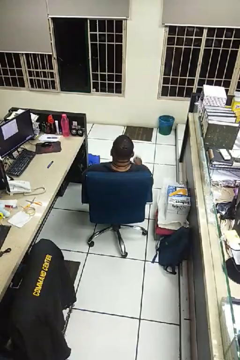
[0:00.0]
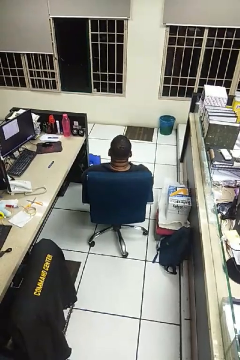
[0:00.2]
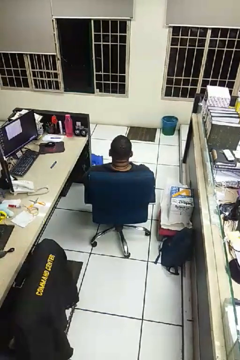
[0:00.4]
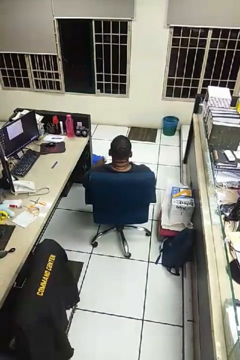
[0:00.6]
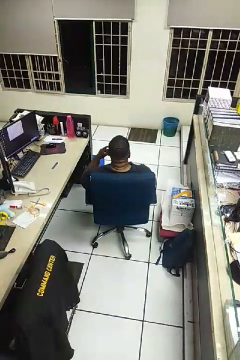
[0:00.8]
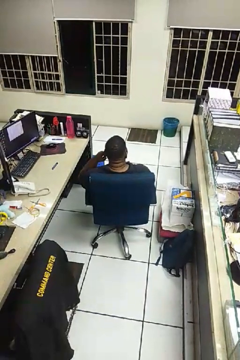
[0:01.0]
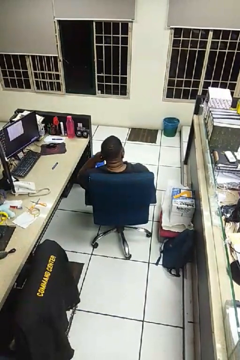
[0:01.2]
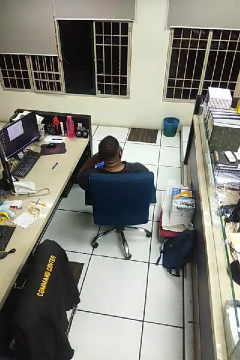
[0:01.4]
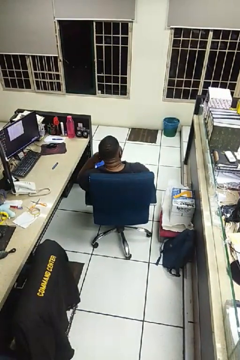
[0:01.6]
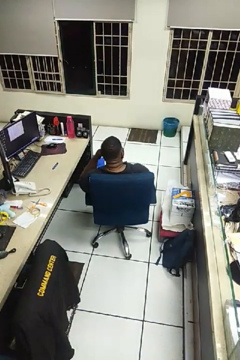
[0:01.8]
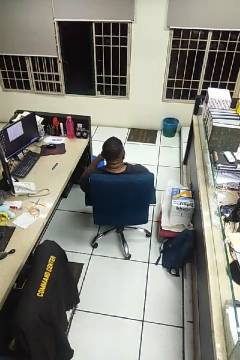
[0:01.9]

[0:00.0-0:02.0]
person gestures listen closely

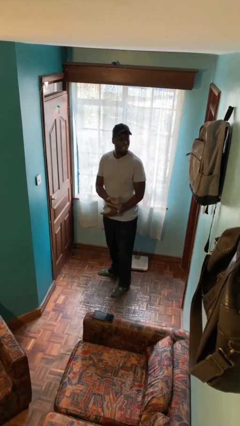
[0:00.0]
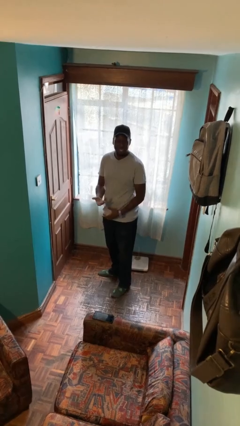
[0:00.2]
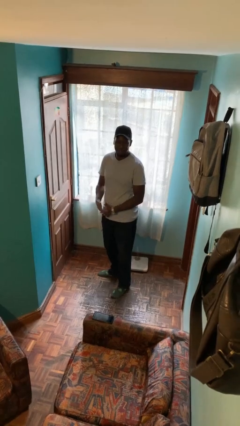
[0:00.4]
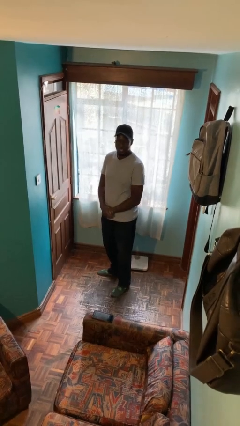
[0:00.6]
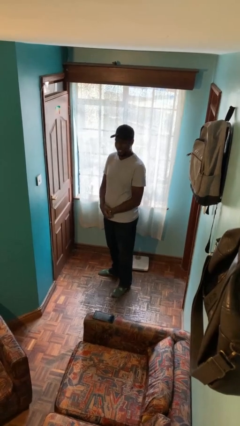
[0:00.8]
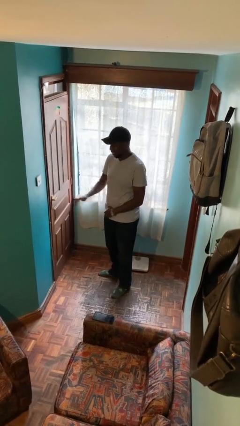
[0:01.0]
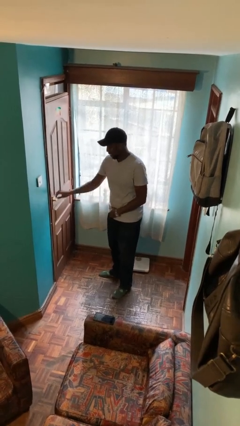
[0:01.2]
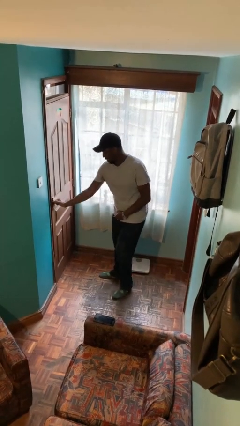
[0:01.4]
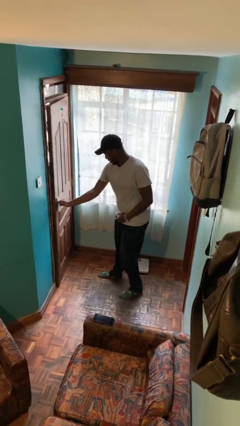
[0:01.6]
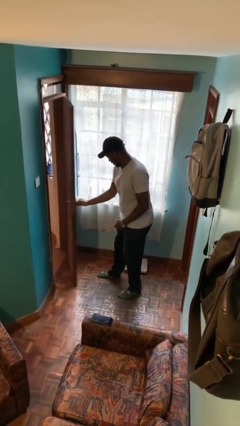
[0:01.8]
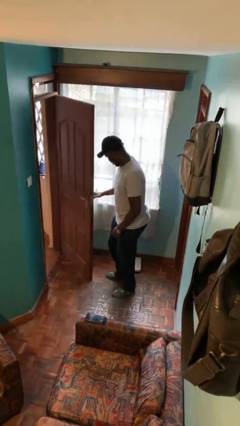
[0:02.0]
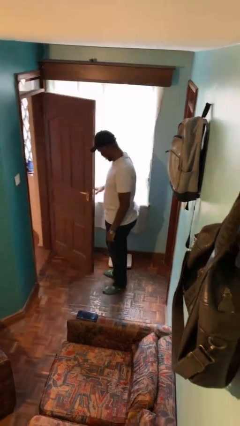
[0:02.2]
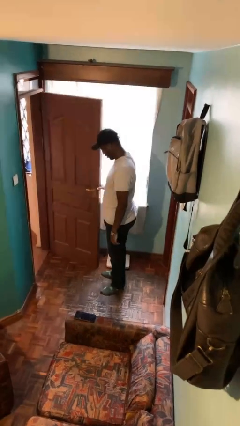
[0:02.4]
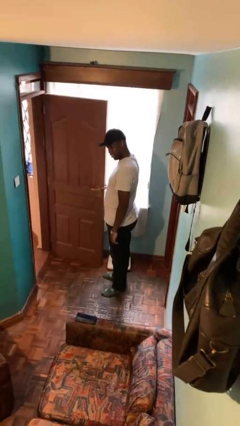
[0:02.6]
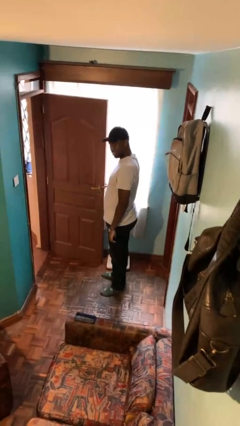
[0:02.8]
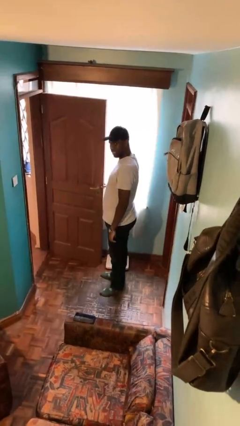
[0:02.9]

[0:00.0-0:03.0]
person opens facility door

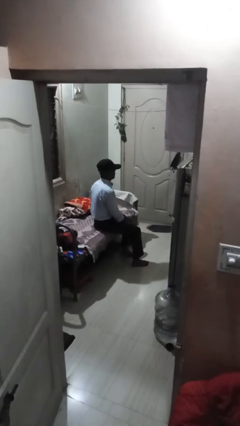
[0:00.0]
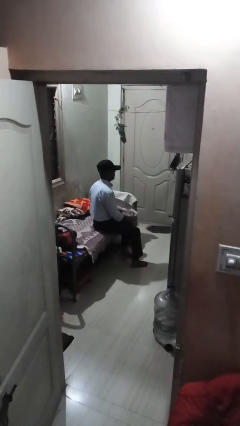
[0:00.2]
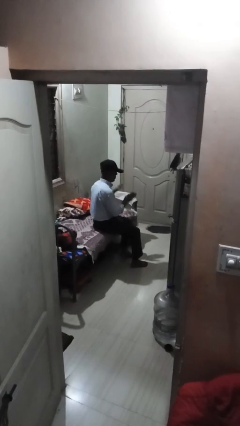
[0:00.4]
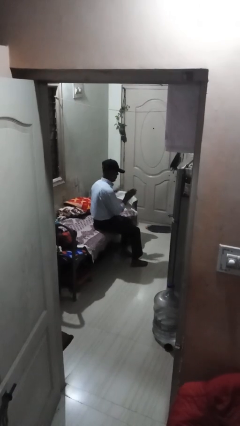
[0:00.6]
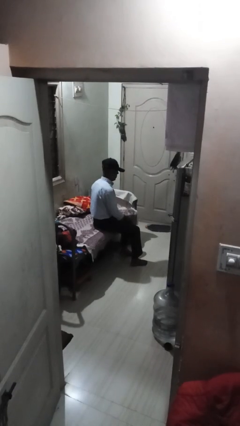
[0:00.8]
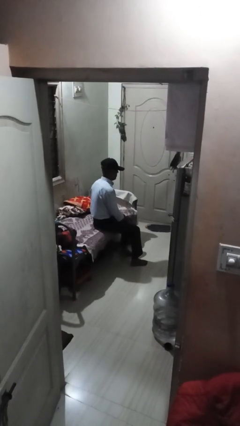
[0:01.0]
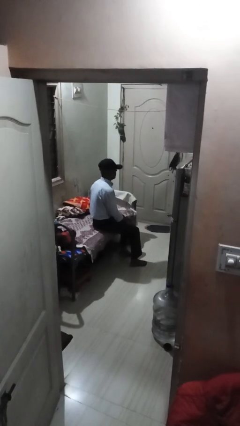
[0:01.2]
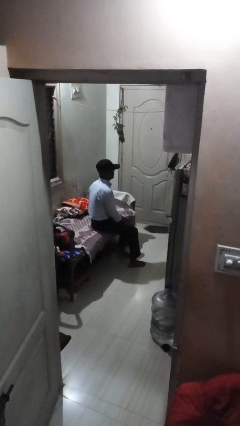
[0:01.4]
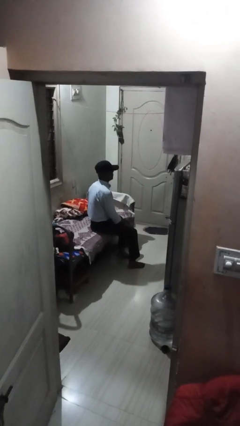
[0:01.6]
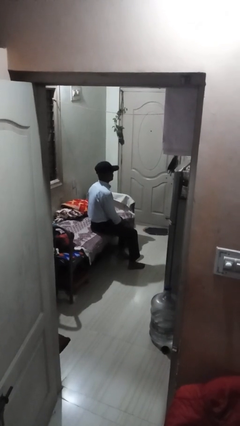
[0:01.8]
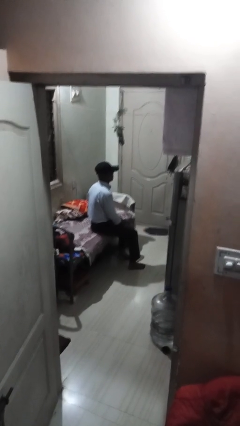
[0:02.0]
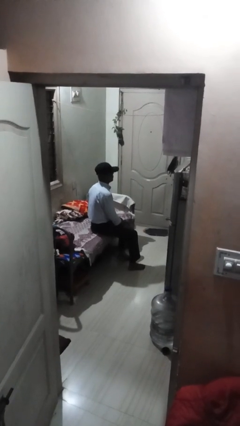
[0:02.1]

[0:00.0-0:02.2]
person slaps hands on thighs

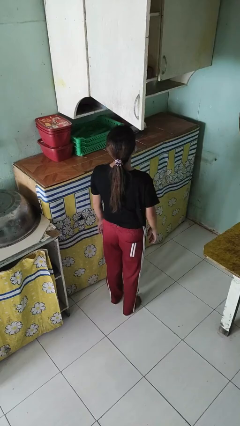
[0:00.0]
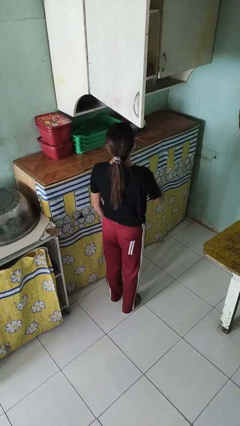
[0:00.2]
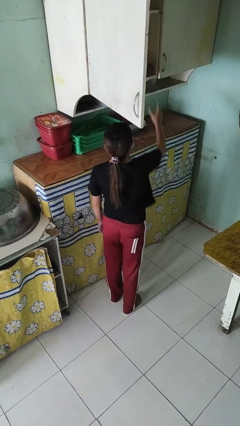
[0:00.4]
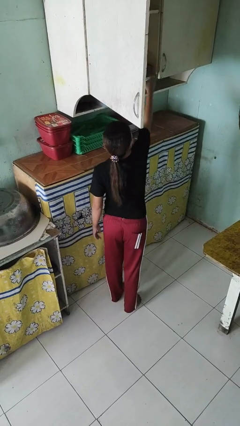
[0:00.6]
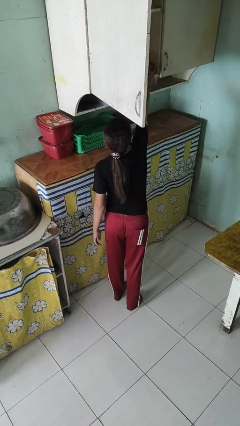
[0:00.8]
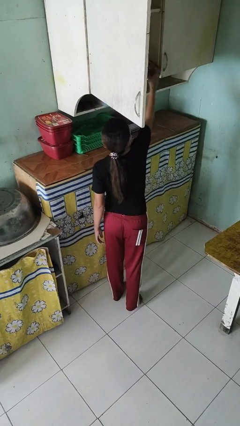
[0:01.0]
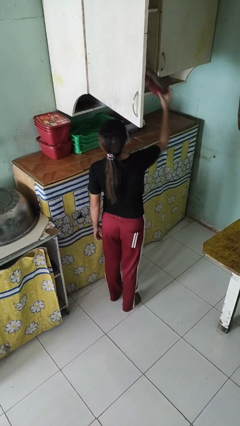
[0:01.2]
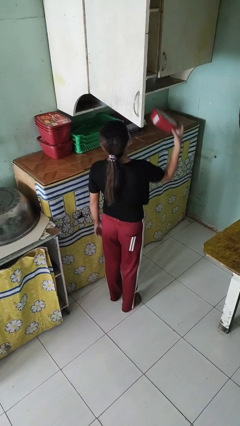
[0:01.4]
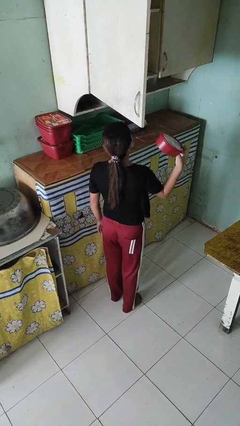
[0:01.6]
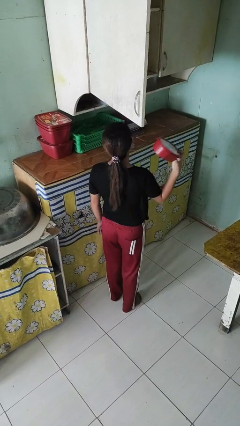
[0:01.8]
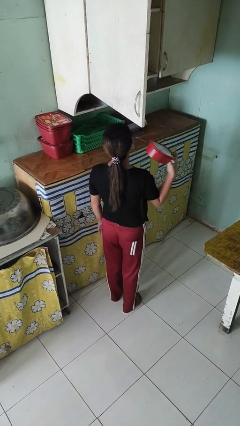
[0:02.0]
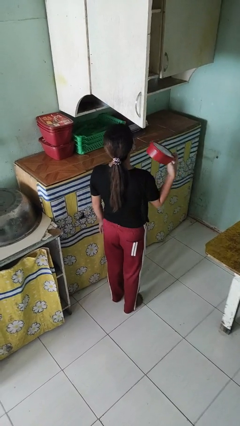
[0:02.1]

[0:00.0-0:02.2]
person takes object from cabinet

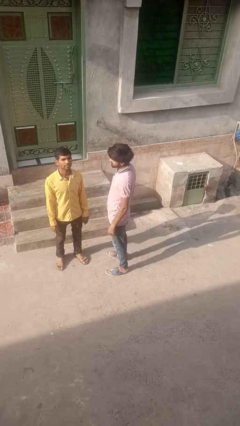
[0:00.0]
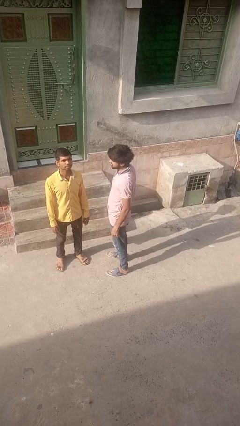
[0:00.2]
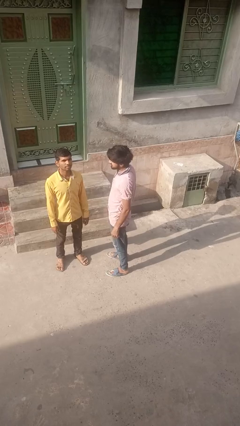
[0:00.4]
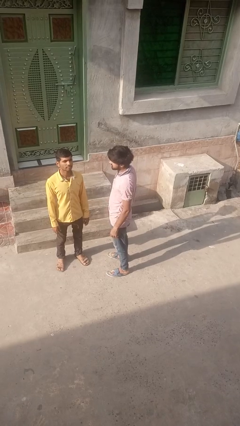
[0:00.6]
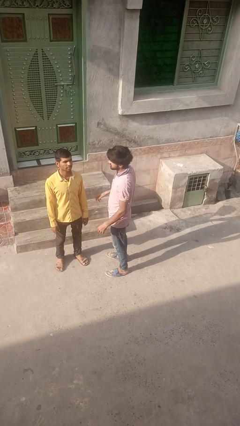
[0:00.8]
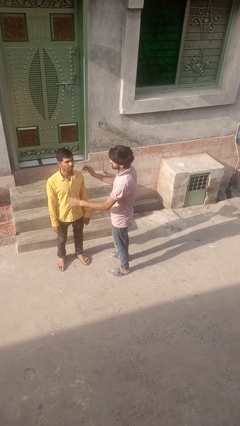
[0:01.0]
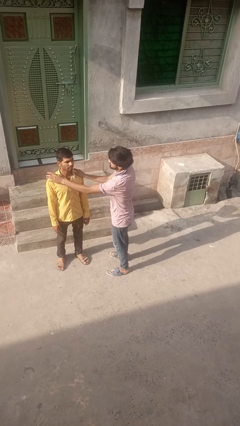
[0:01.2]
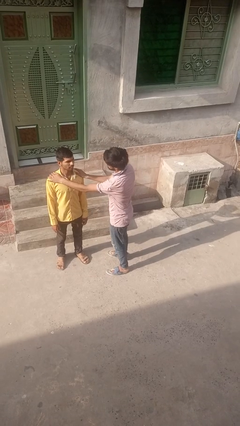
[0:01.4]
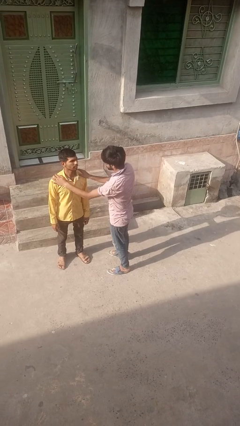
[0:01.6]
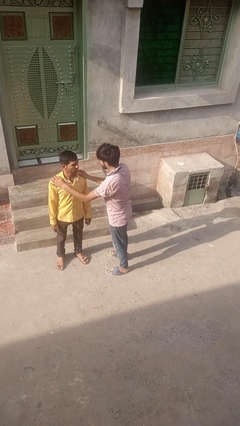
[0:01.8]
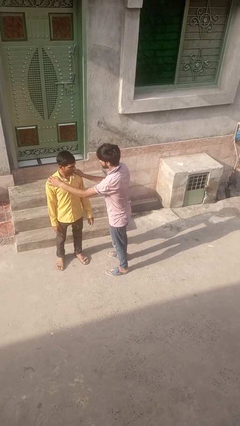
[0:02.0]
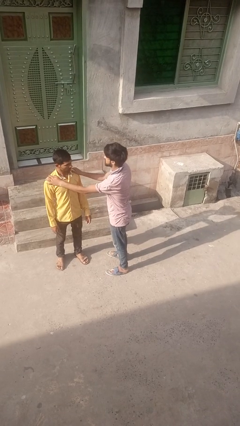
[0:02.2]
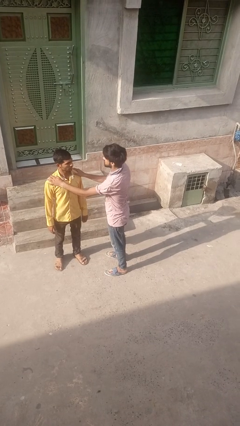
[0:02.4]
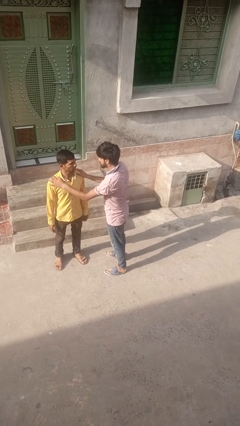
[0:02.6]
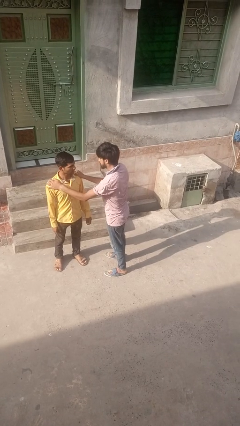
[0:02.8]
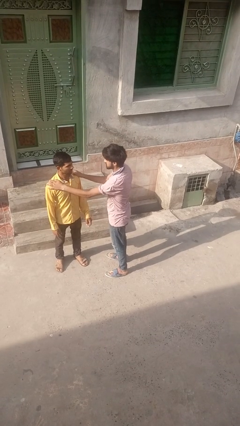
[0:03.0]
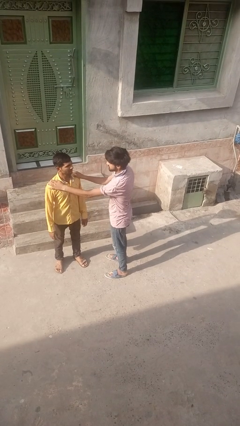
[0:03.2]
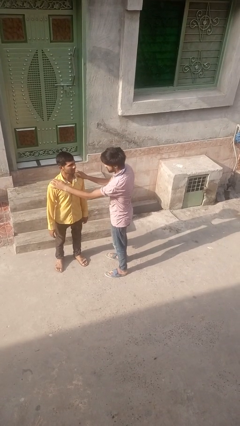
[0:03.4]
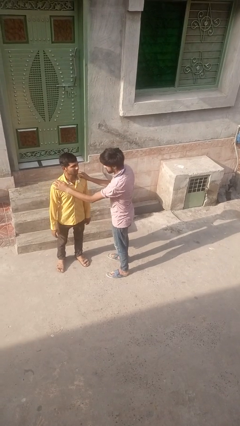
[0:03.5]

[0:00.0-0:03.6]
person grabs person by shoulder

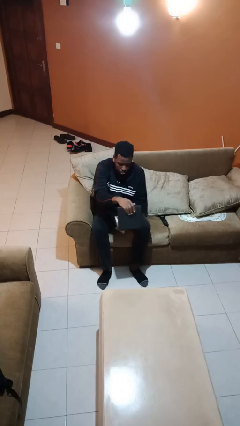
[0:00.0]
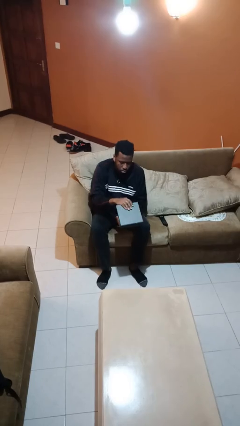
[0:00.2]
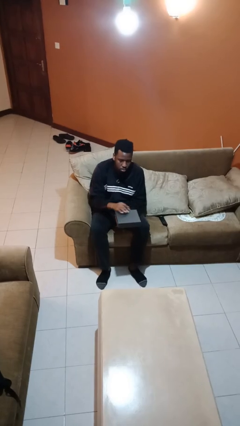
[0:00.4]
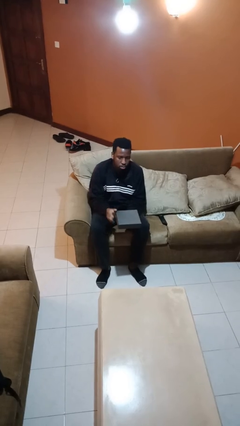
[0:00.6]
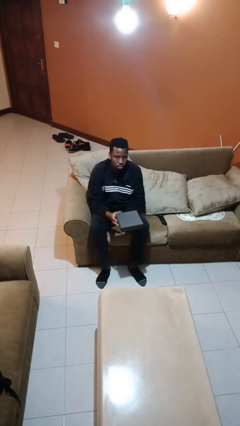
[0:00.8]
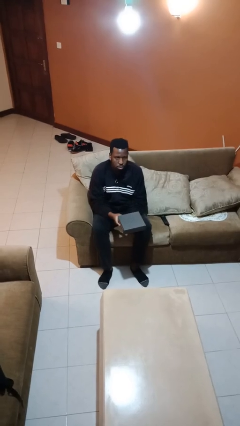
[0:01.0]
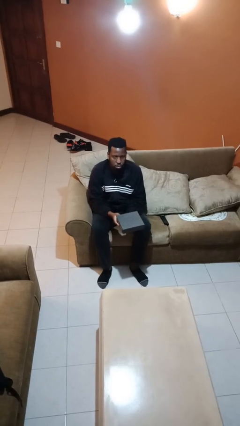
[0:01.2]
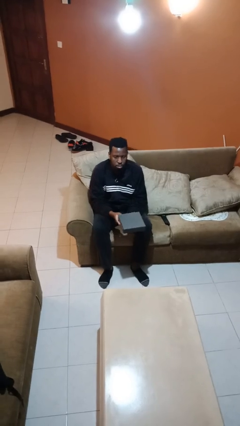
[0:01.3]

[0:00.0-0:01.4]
person closes jewelry box

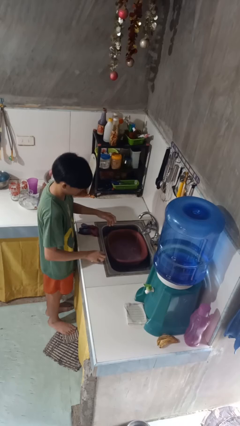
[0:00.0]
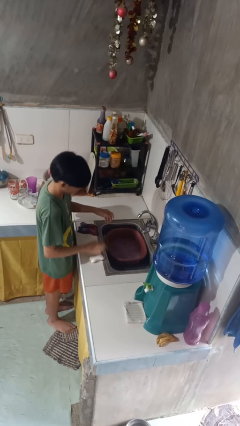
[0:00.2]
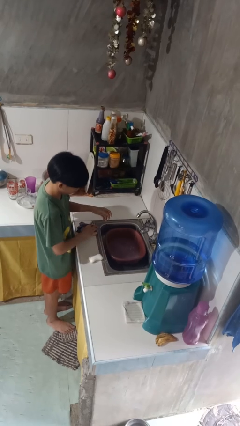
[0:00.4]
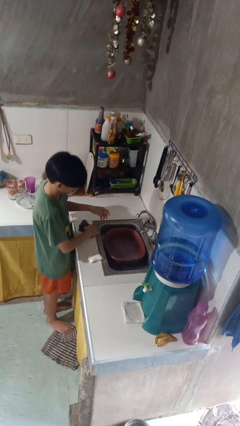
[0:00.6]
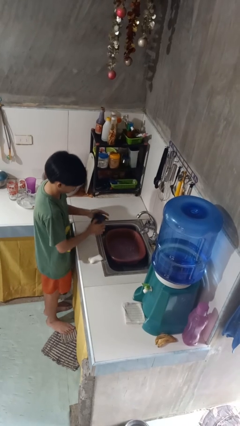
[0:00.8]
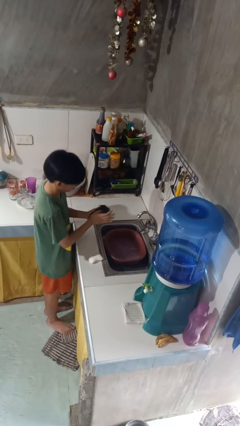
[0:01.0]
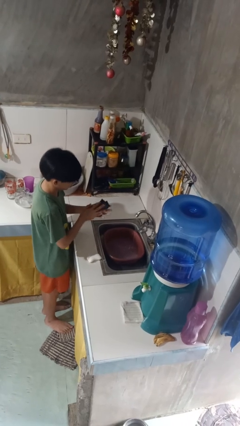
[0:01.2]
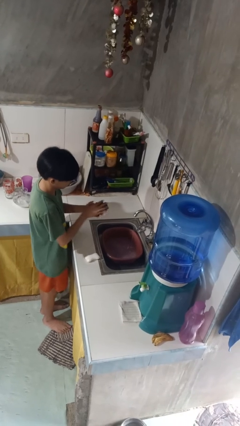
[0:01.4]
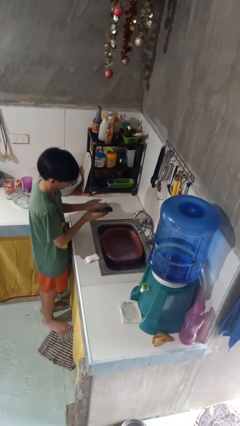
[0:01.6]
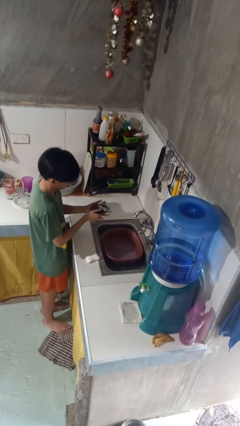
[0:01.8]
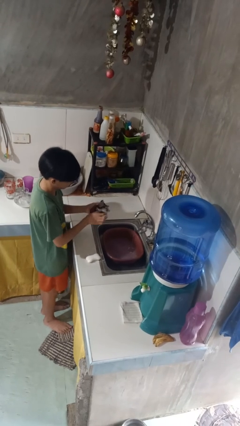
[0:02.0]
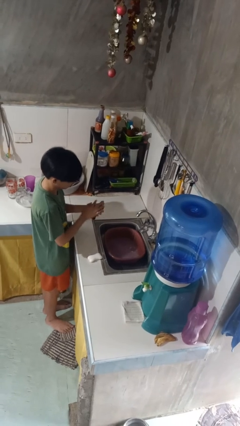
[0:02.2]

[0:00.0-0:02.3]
person dries hands with towel

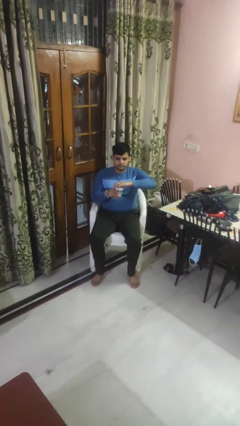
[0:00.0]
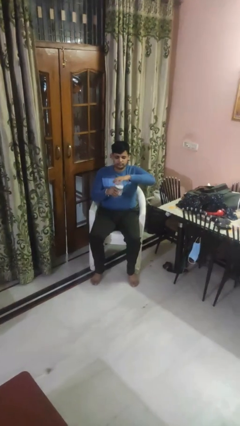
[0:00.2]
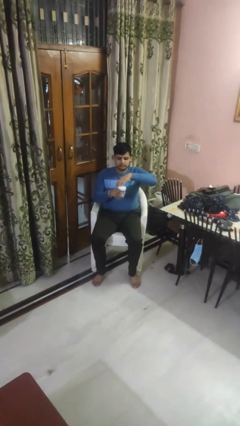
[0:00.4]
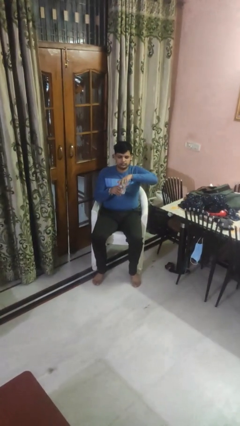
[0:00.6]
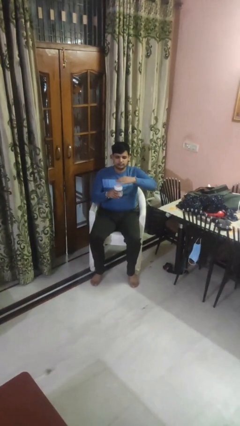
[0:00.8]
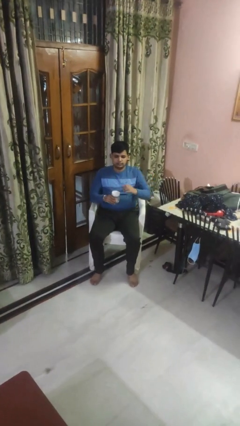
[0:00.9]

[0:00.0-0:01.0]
person closes jar
